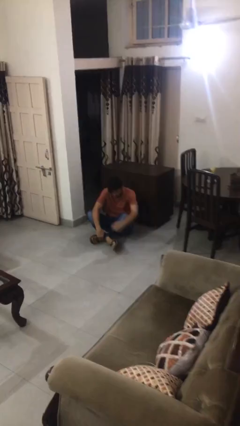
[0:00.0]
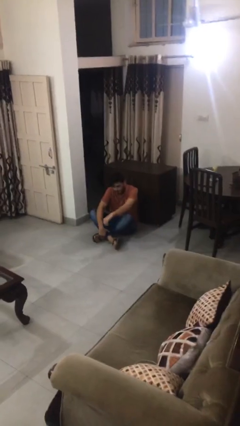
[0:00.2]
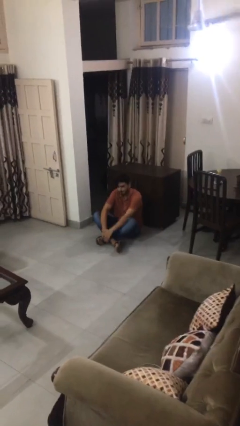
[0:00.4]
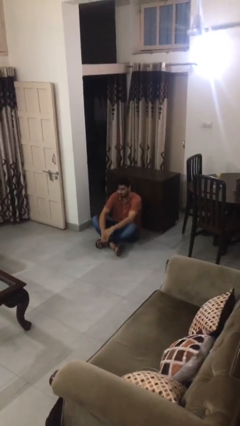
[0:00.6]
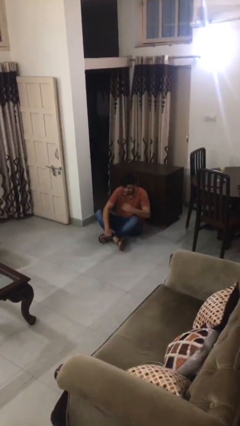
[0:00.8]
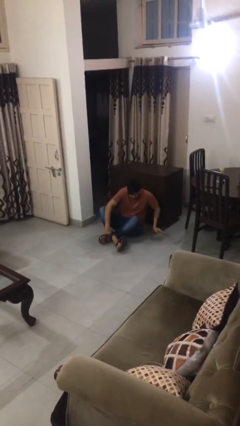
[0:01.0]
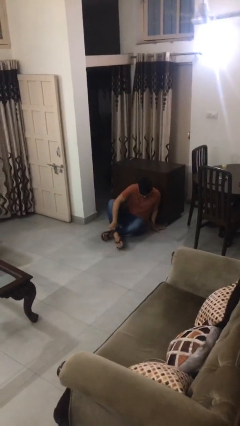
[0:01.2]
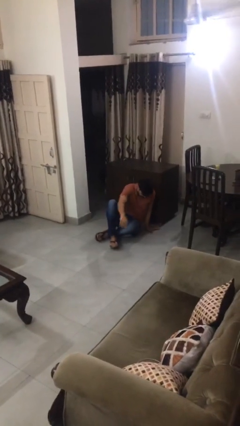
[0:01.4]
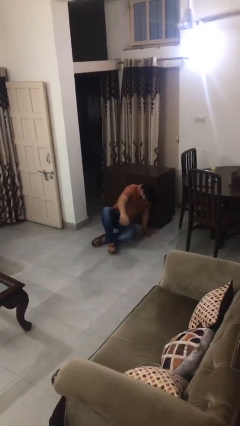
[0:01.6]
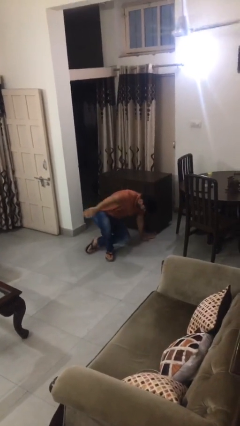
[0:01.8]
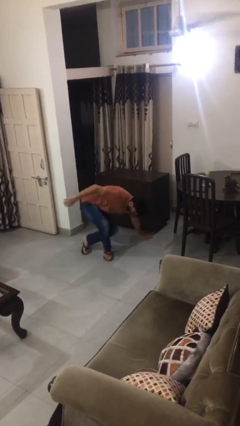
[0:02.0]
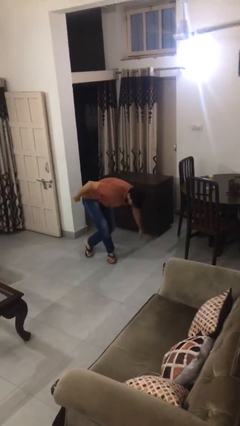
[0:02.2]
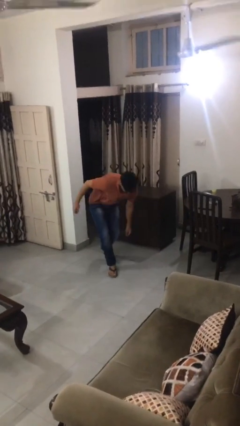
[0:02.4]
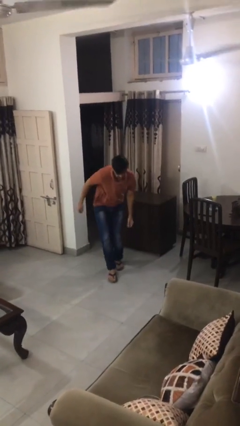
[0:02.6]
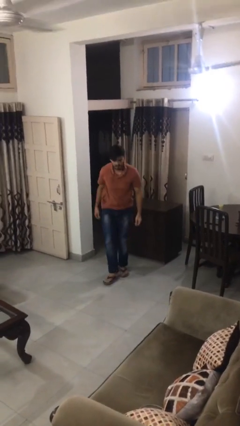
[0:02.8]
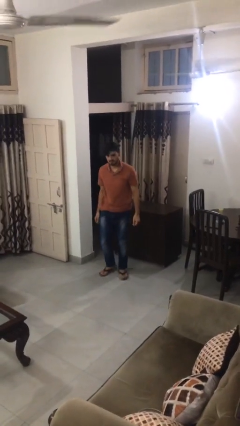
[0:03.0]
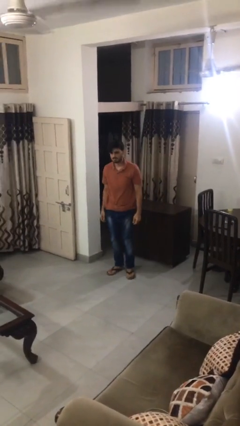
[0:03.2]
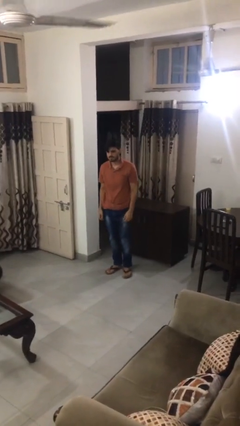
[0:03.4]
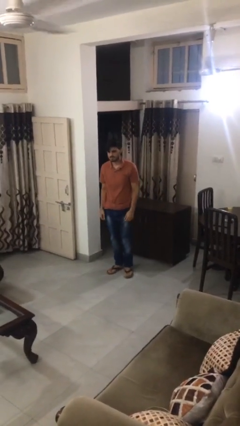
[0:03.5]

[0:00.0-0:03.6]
person stands up from floor

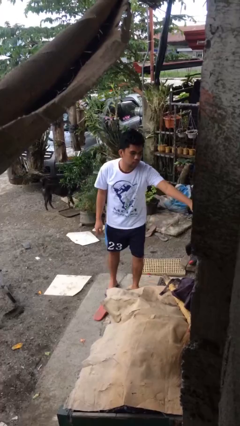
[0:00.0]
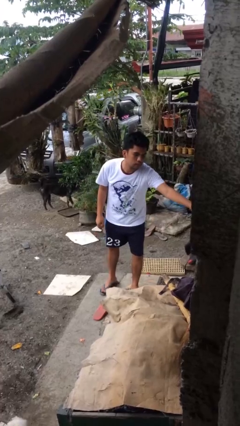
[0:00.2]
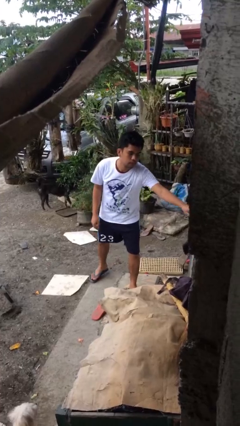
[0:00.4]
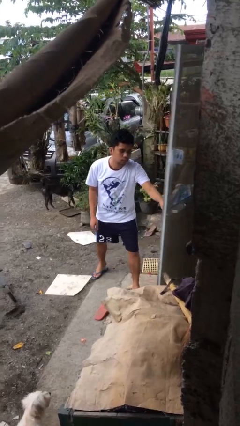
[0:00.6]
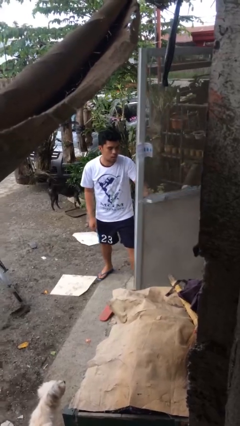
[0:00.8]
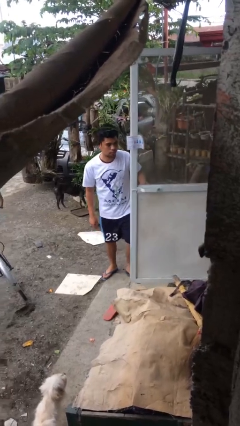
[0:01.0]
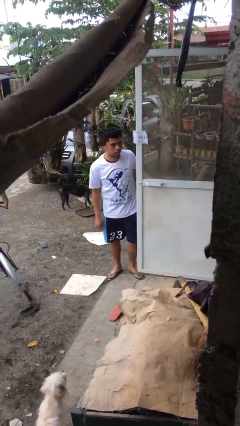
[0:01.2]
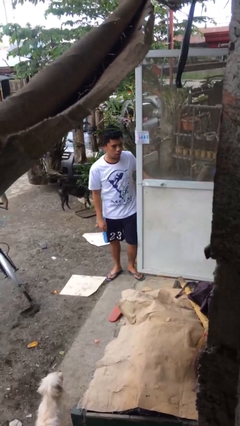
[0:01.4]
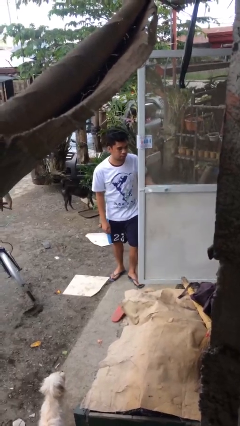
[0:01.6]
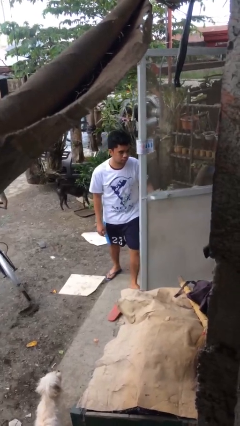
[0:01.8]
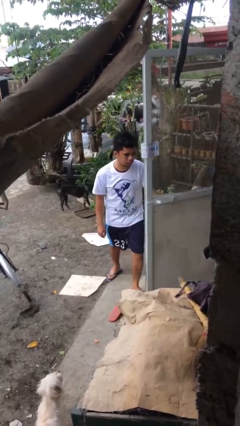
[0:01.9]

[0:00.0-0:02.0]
person opens facility door

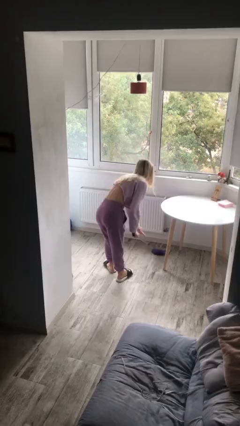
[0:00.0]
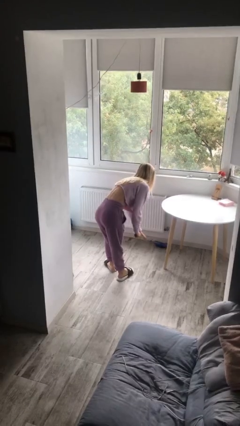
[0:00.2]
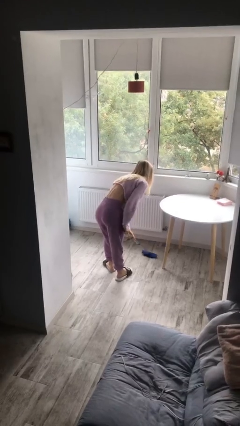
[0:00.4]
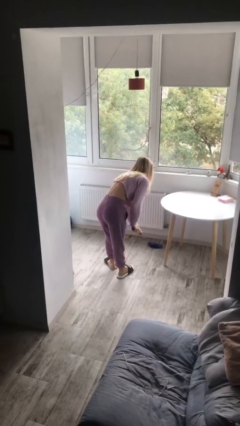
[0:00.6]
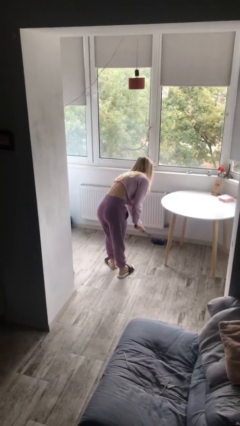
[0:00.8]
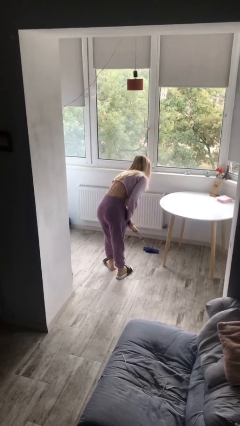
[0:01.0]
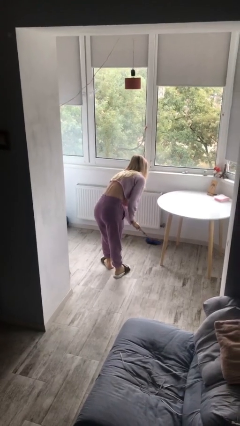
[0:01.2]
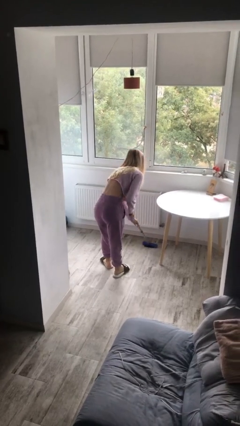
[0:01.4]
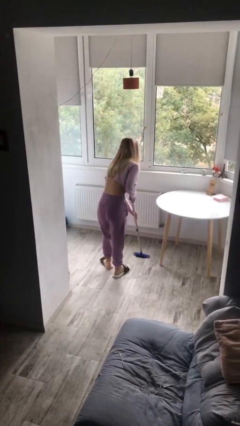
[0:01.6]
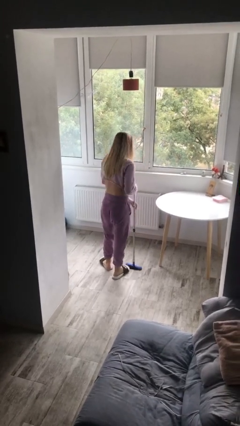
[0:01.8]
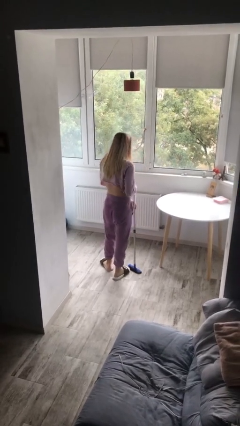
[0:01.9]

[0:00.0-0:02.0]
person mops

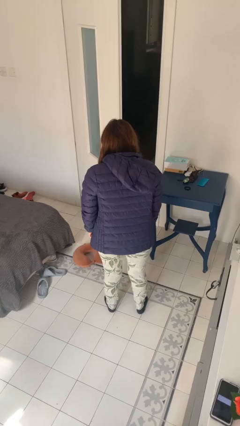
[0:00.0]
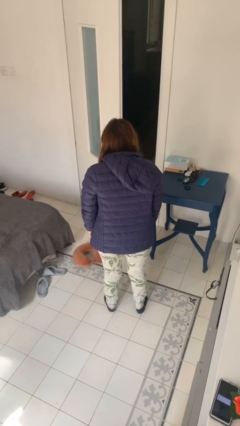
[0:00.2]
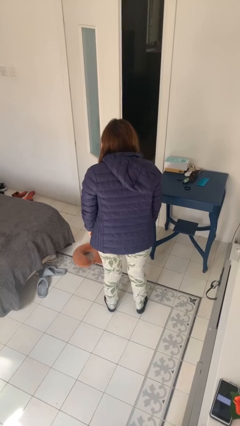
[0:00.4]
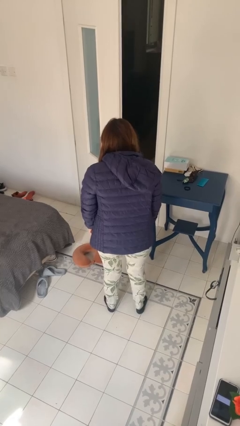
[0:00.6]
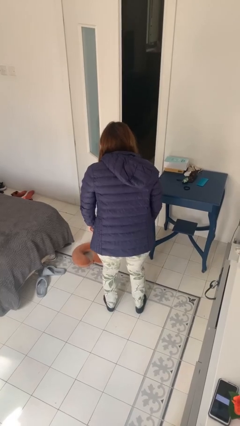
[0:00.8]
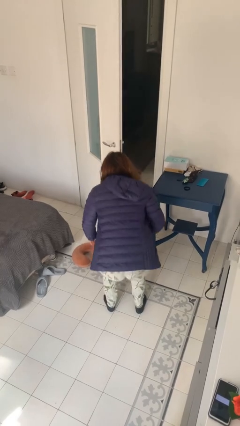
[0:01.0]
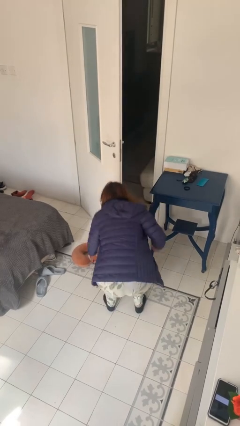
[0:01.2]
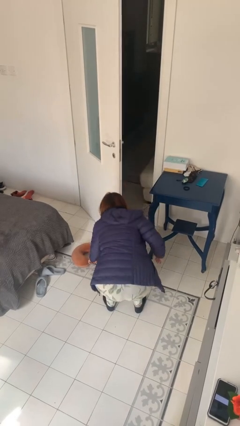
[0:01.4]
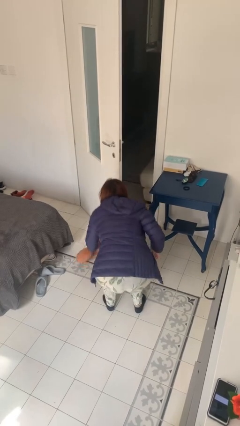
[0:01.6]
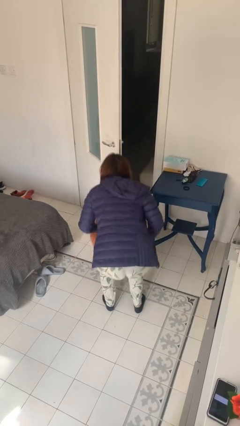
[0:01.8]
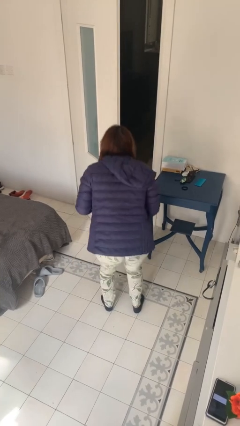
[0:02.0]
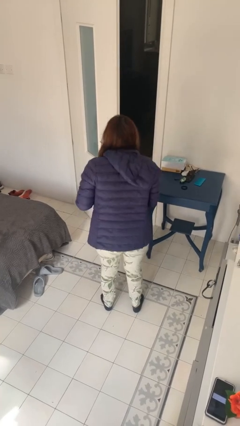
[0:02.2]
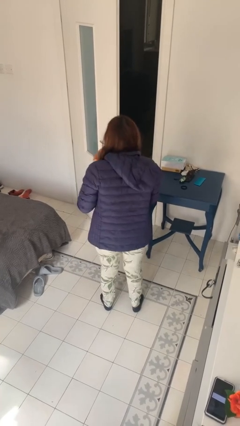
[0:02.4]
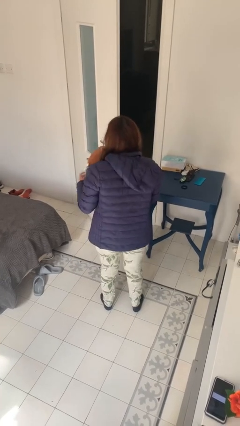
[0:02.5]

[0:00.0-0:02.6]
person picks up object from floor

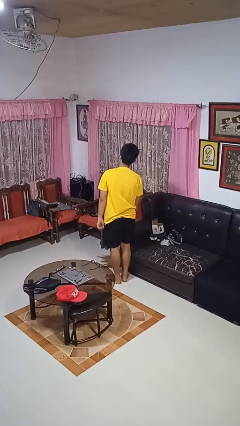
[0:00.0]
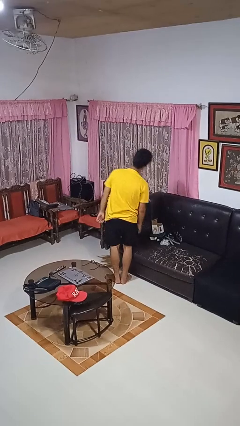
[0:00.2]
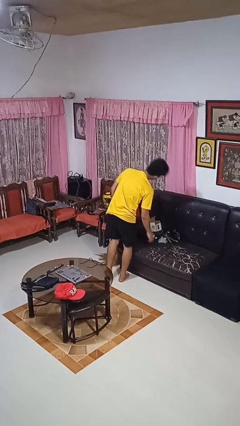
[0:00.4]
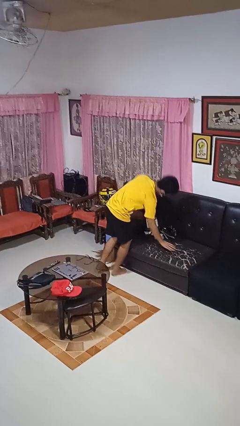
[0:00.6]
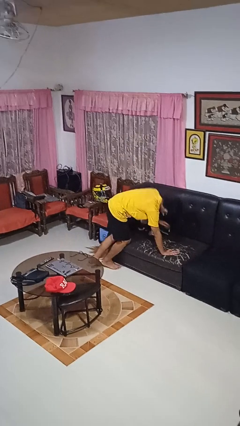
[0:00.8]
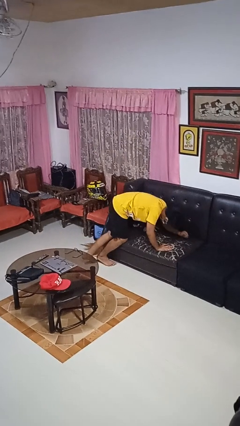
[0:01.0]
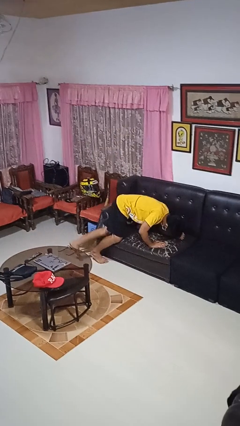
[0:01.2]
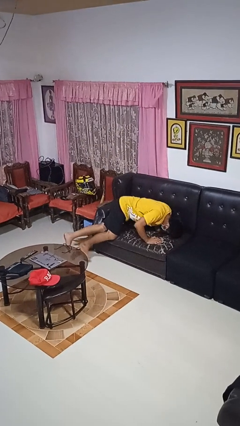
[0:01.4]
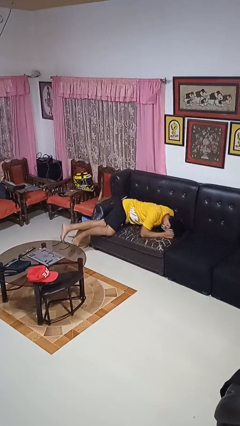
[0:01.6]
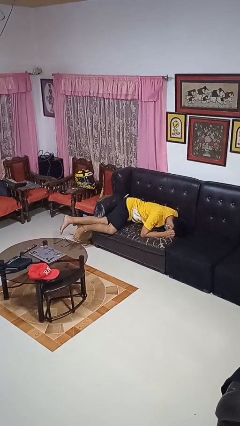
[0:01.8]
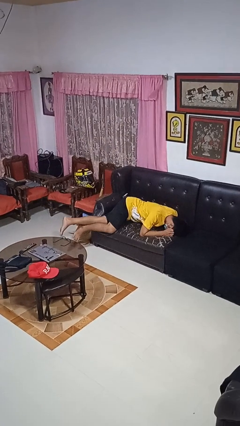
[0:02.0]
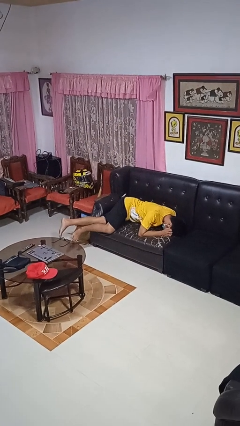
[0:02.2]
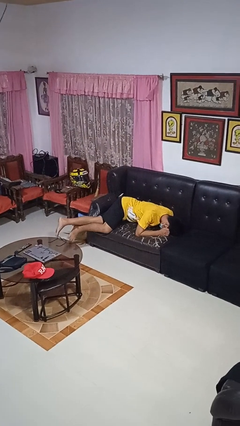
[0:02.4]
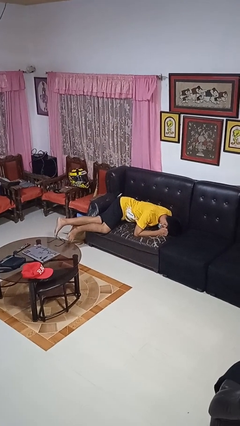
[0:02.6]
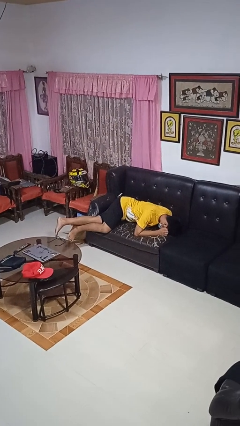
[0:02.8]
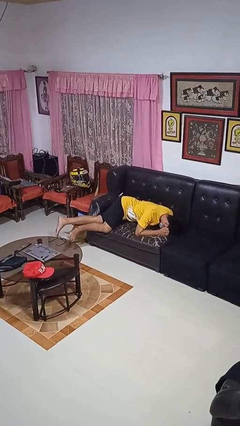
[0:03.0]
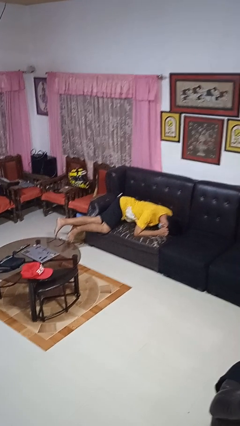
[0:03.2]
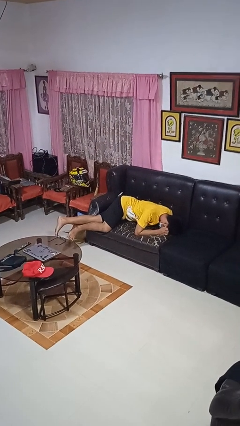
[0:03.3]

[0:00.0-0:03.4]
person lies down on couch

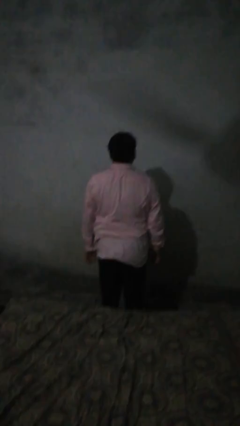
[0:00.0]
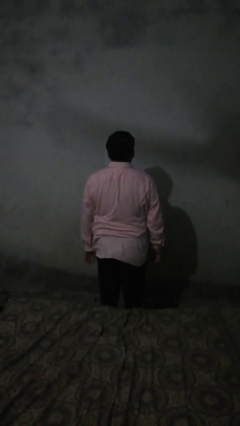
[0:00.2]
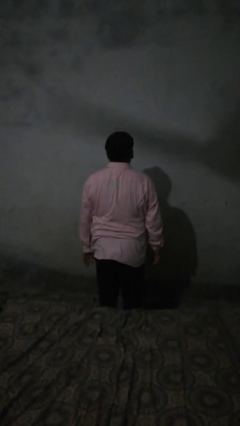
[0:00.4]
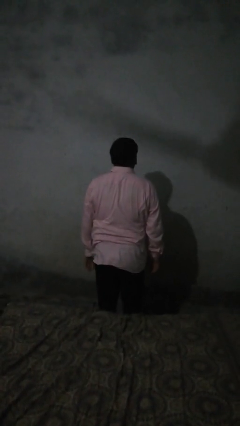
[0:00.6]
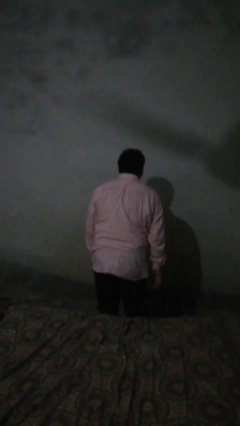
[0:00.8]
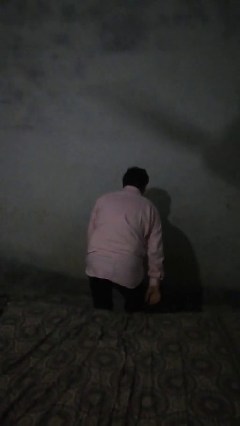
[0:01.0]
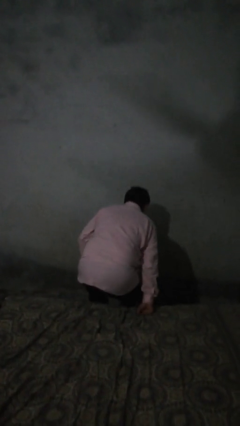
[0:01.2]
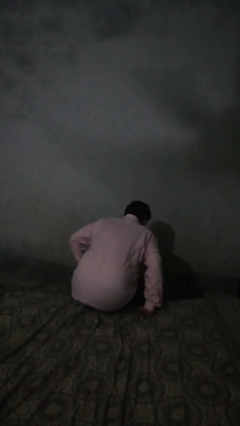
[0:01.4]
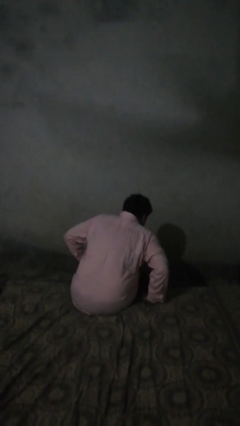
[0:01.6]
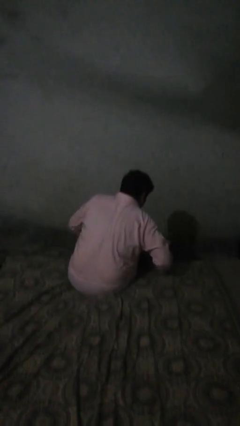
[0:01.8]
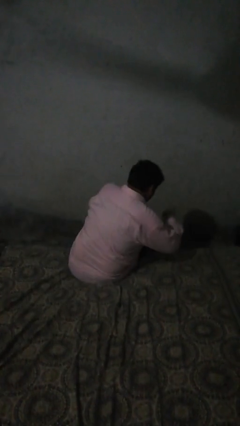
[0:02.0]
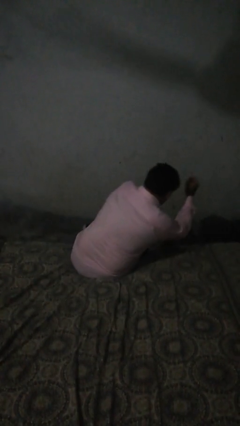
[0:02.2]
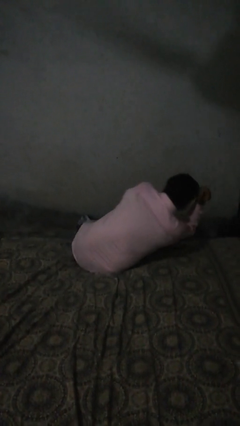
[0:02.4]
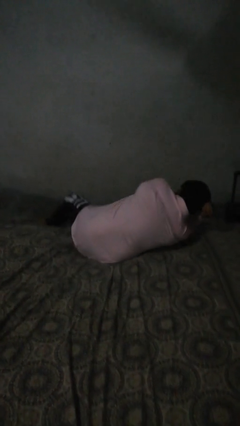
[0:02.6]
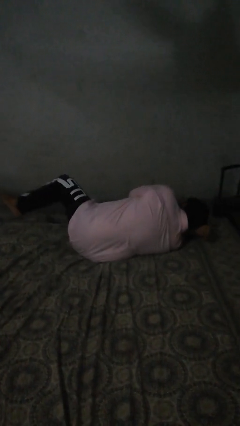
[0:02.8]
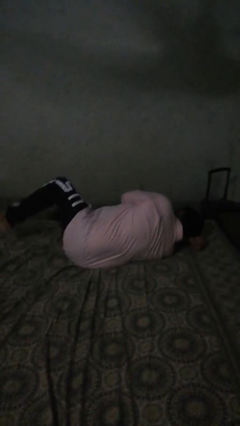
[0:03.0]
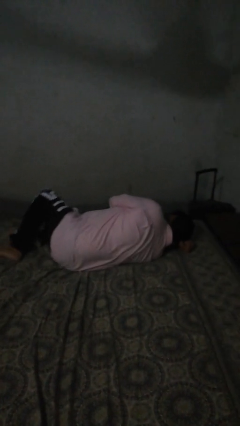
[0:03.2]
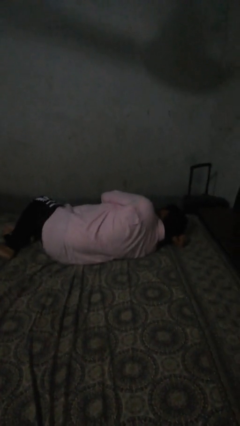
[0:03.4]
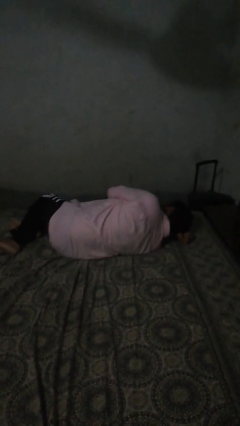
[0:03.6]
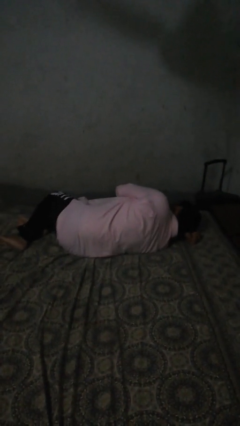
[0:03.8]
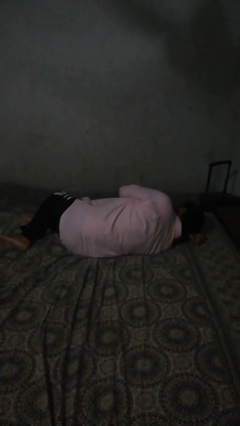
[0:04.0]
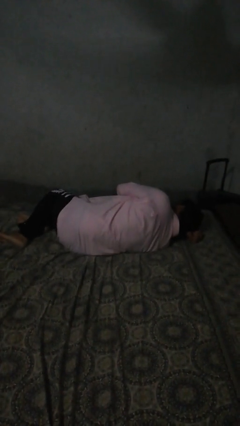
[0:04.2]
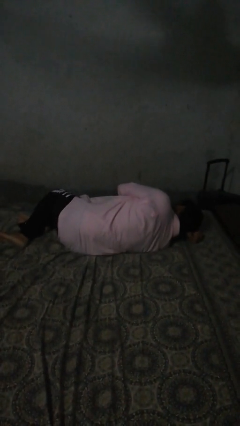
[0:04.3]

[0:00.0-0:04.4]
person lies down on bed
